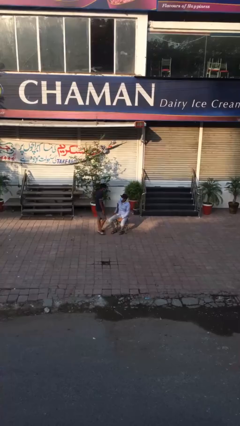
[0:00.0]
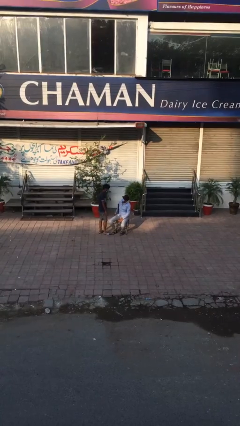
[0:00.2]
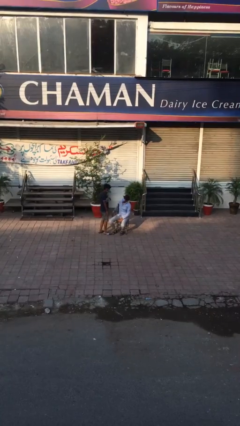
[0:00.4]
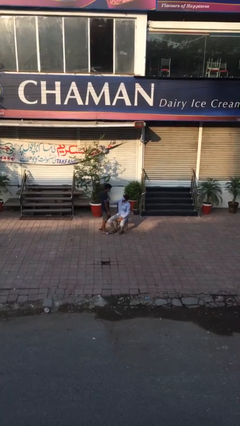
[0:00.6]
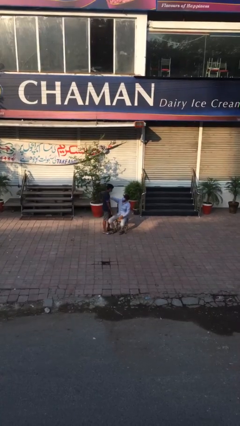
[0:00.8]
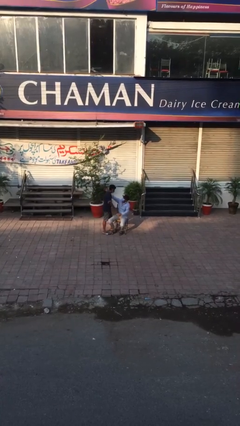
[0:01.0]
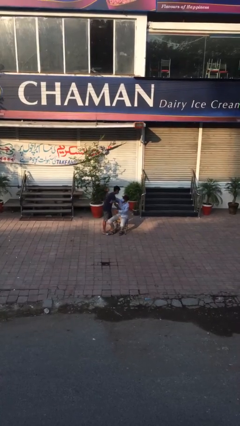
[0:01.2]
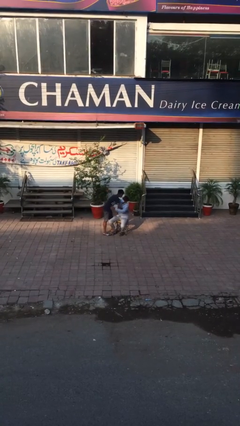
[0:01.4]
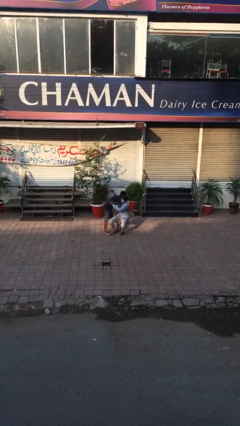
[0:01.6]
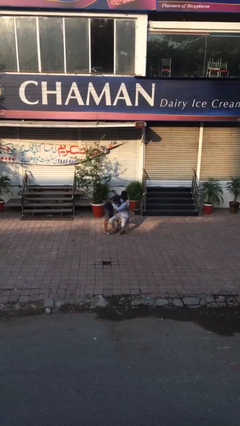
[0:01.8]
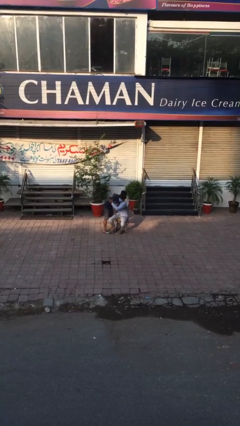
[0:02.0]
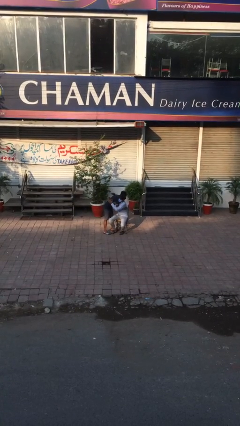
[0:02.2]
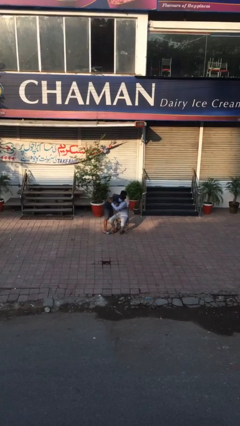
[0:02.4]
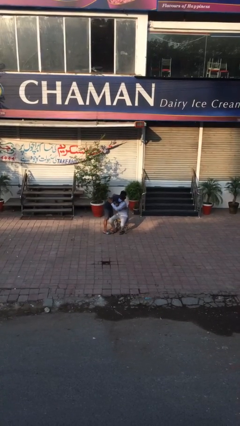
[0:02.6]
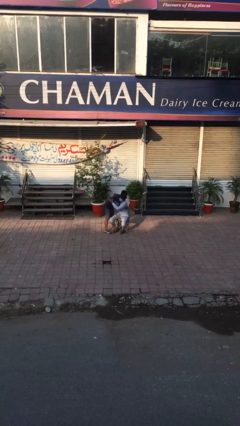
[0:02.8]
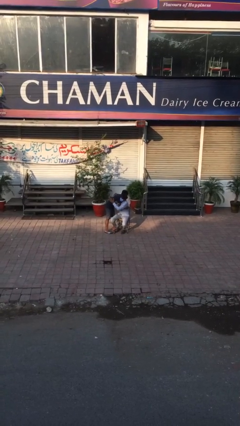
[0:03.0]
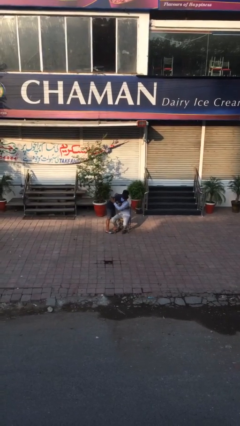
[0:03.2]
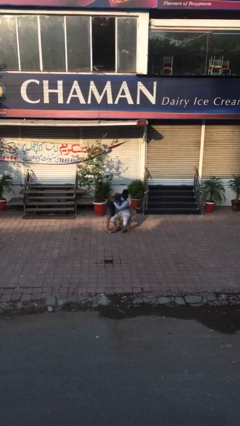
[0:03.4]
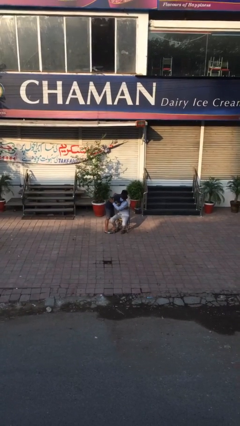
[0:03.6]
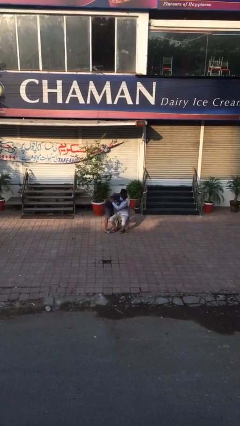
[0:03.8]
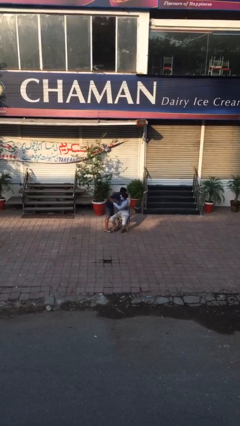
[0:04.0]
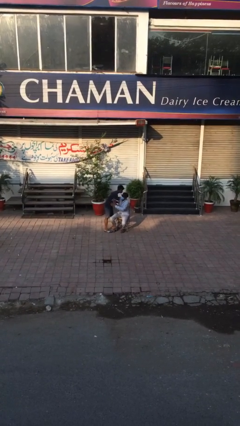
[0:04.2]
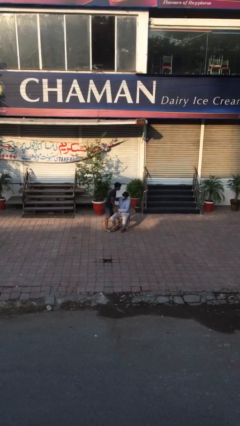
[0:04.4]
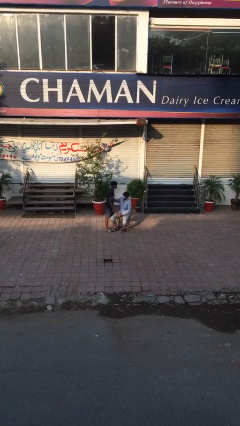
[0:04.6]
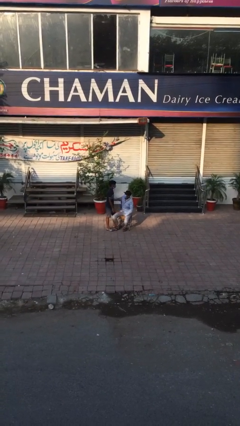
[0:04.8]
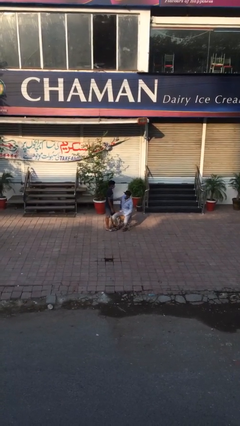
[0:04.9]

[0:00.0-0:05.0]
person embraces person

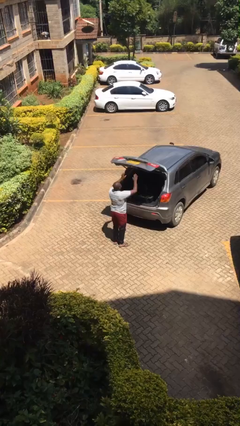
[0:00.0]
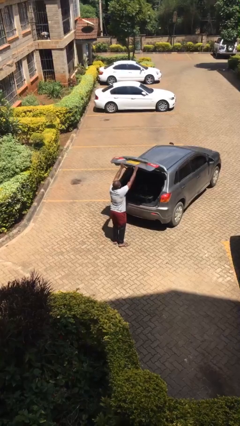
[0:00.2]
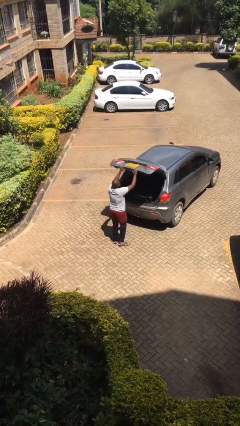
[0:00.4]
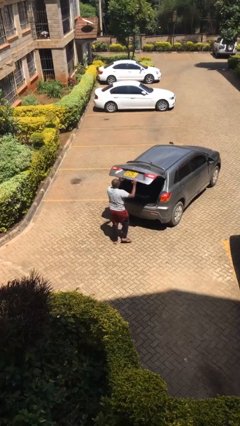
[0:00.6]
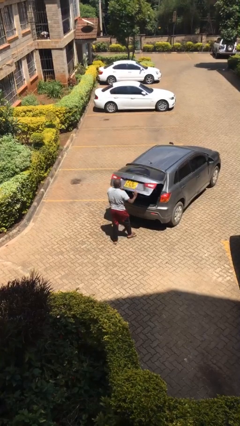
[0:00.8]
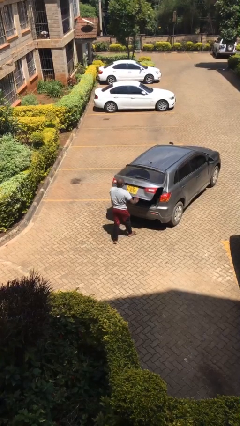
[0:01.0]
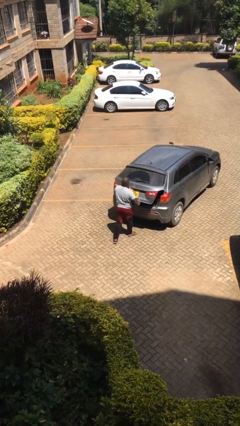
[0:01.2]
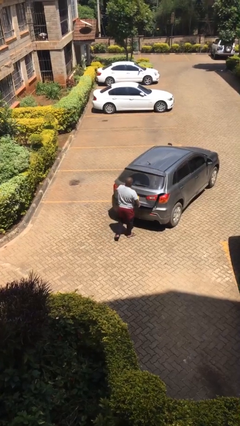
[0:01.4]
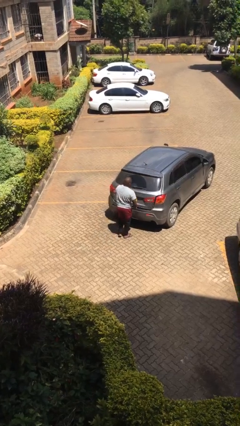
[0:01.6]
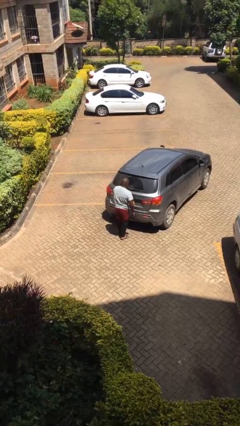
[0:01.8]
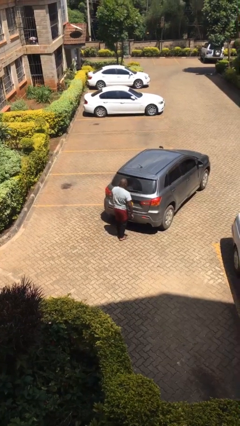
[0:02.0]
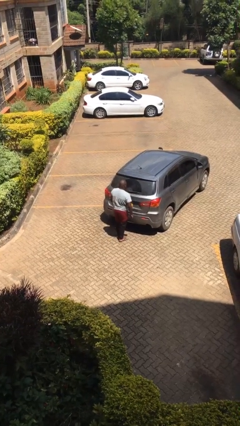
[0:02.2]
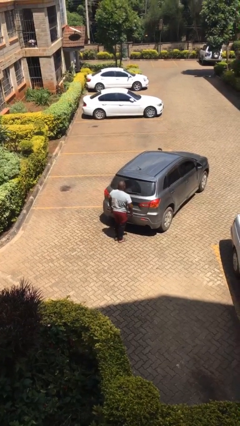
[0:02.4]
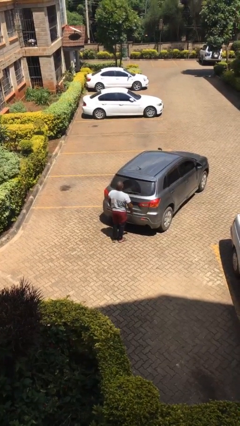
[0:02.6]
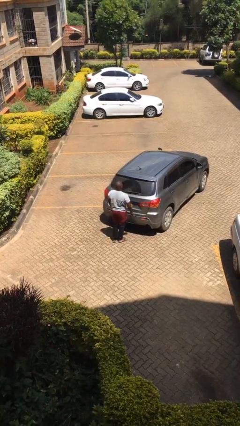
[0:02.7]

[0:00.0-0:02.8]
person closes car trunk

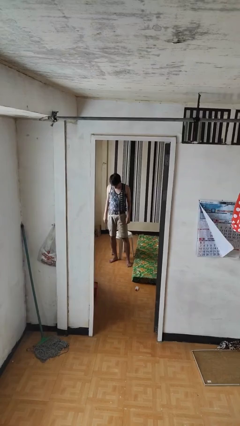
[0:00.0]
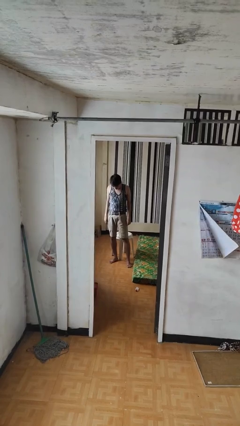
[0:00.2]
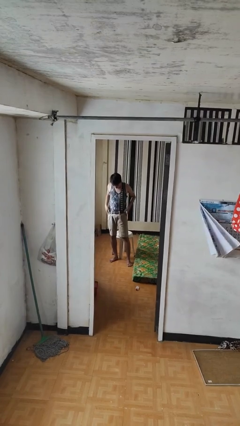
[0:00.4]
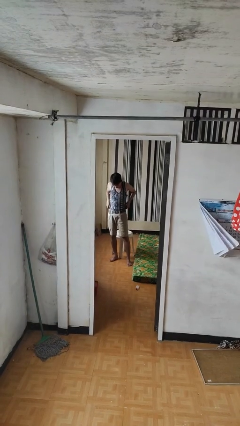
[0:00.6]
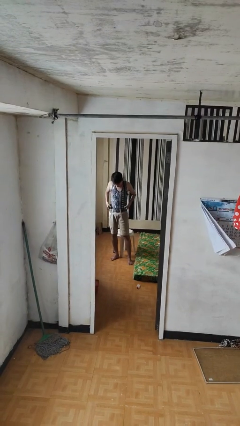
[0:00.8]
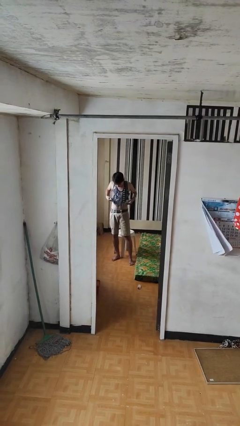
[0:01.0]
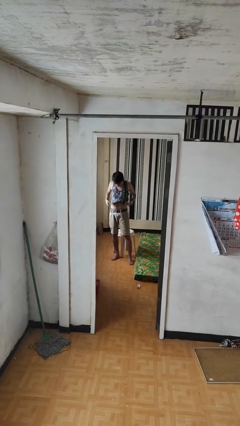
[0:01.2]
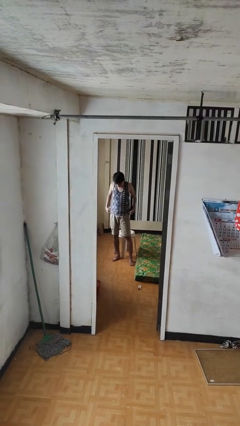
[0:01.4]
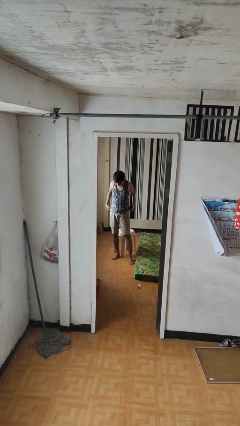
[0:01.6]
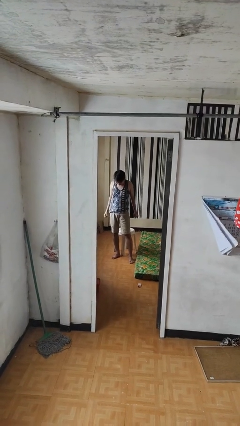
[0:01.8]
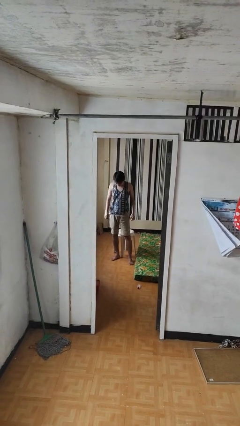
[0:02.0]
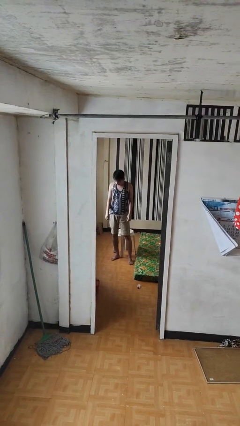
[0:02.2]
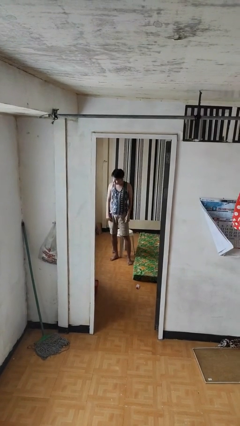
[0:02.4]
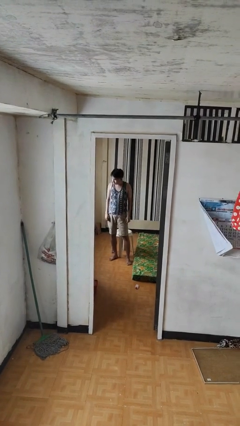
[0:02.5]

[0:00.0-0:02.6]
person untucks shirt

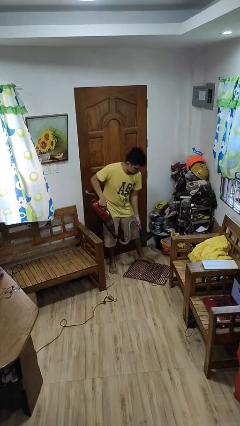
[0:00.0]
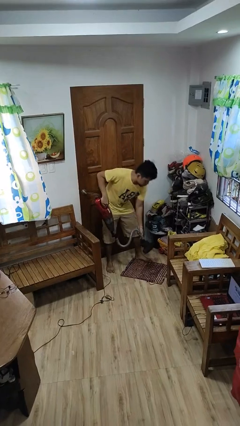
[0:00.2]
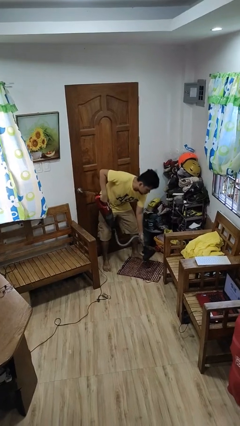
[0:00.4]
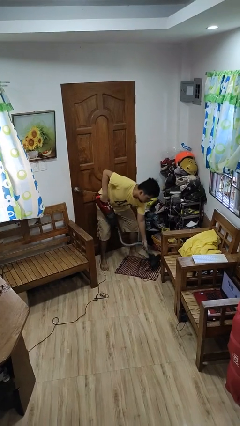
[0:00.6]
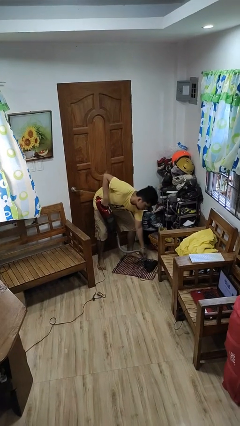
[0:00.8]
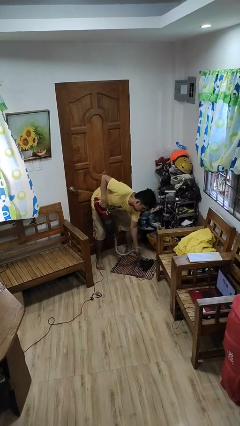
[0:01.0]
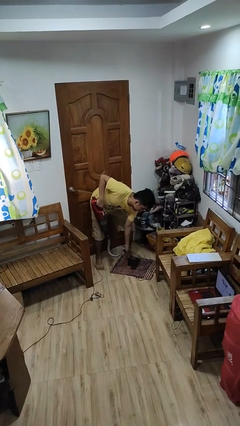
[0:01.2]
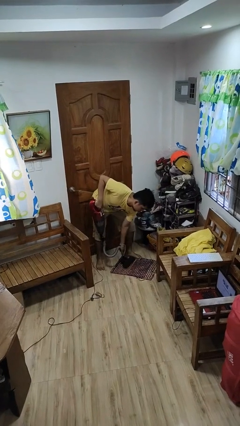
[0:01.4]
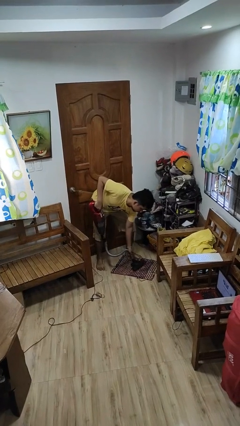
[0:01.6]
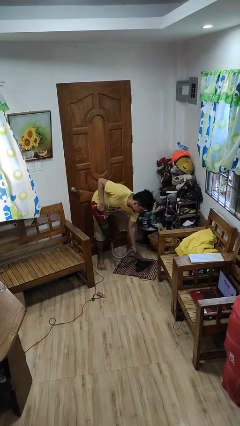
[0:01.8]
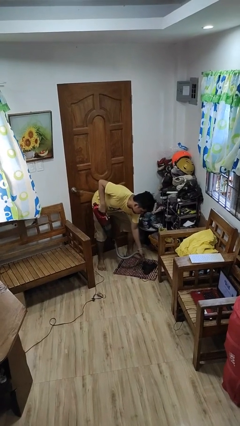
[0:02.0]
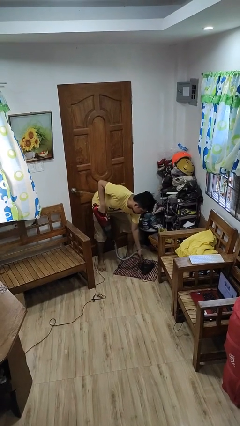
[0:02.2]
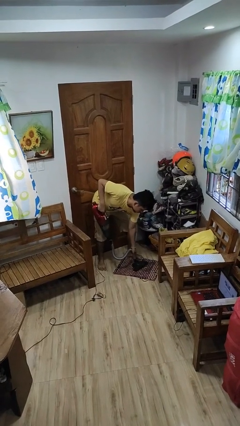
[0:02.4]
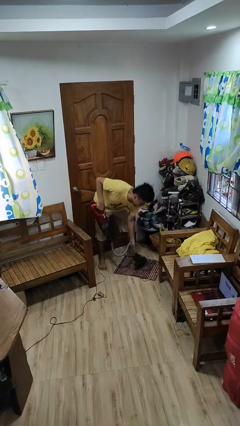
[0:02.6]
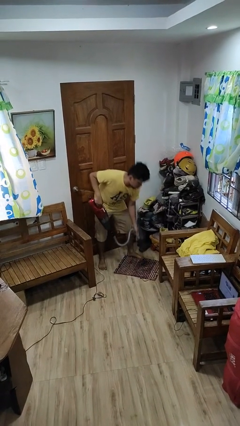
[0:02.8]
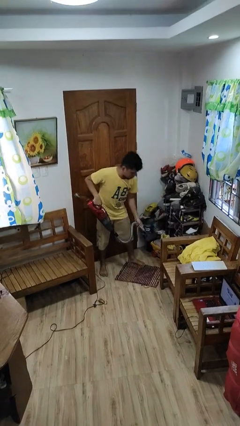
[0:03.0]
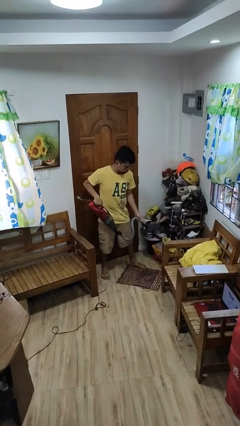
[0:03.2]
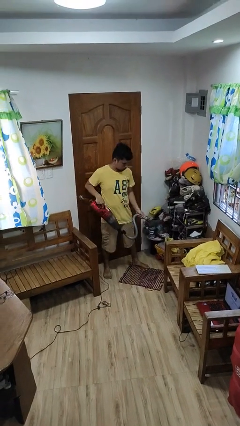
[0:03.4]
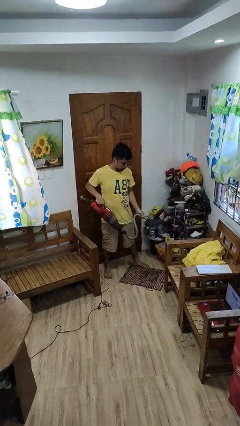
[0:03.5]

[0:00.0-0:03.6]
person vacuums carpet

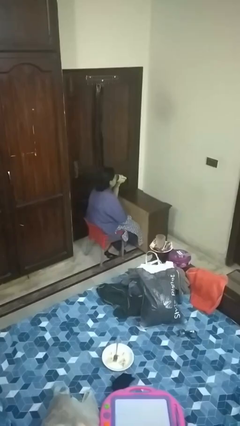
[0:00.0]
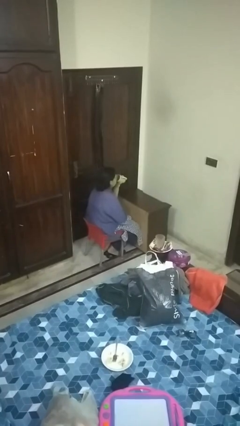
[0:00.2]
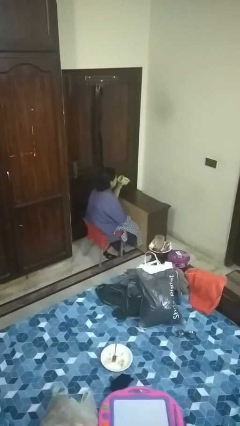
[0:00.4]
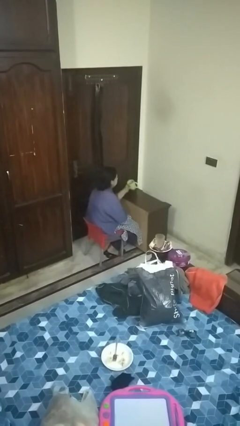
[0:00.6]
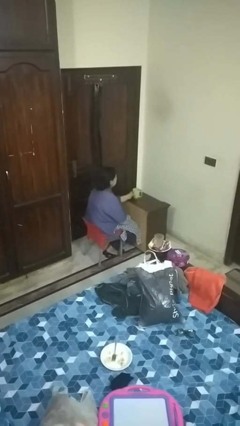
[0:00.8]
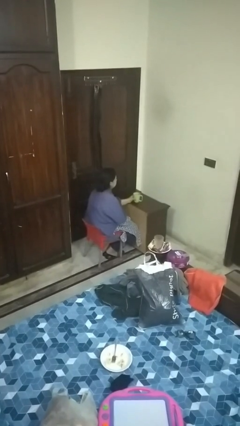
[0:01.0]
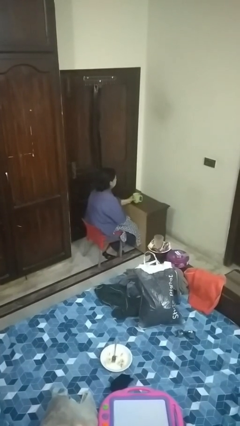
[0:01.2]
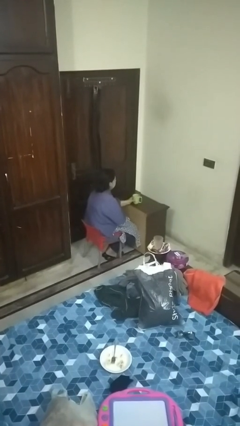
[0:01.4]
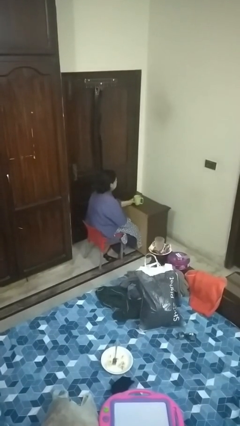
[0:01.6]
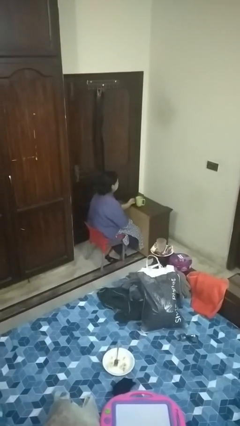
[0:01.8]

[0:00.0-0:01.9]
person puts down object on table

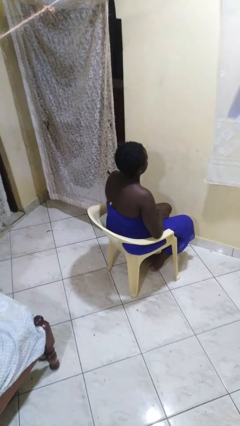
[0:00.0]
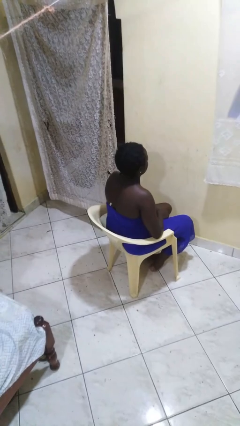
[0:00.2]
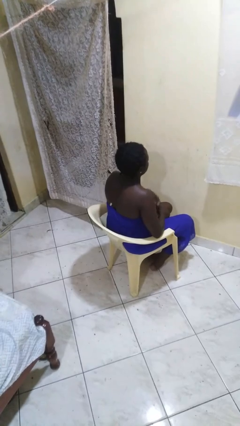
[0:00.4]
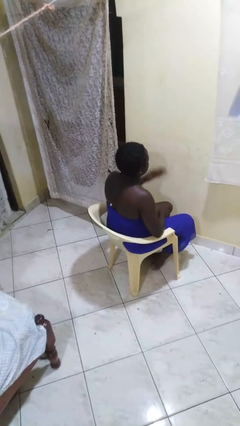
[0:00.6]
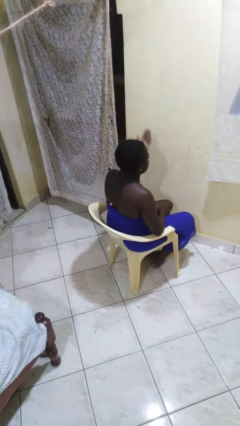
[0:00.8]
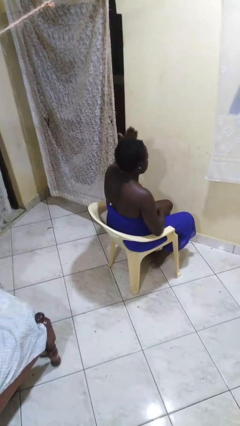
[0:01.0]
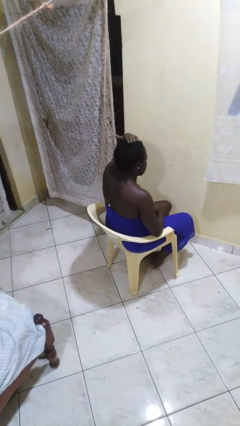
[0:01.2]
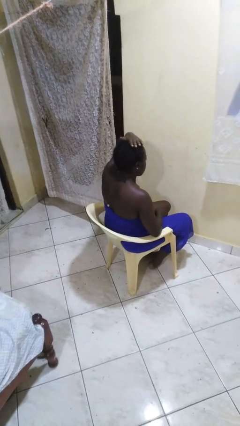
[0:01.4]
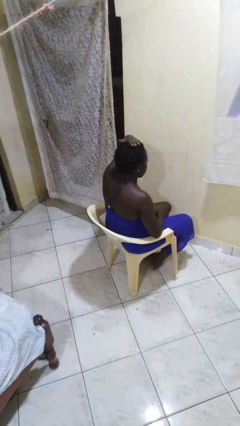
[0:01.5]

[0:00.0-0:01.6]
person pats head
